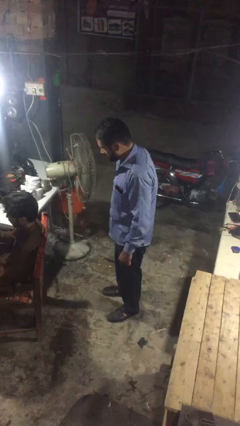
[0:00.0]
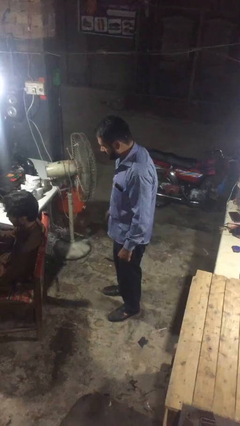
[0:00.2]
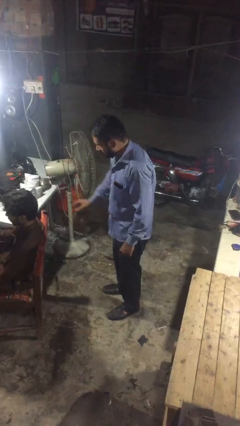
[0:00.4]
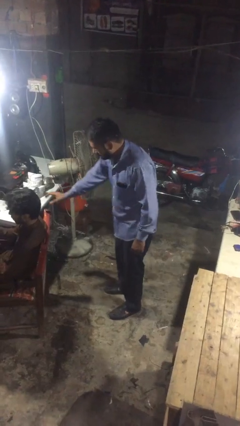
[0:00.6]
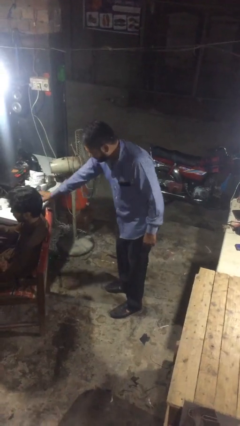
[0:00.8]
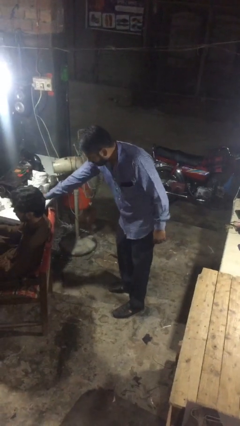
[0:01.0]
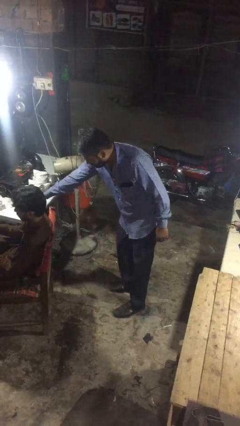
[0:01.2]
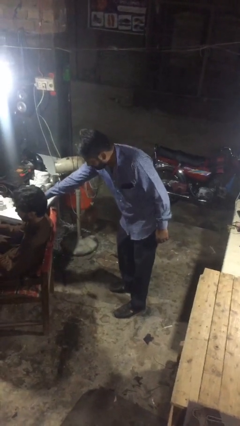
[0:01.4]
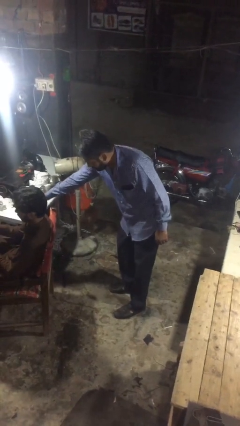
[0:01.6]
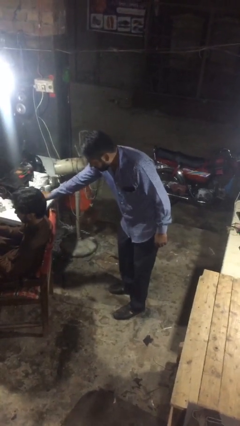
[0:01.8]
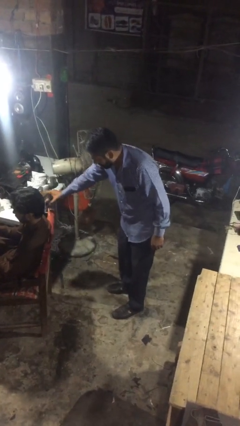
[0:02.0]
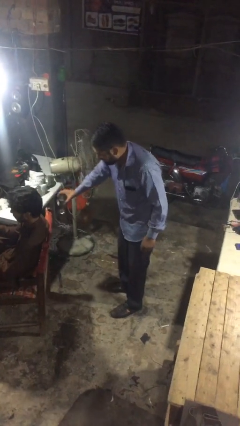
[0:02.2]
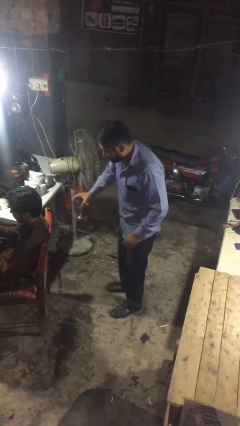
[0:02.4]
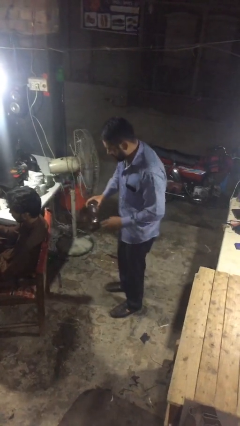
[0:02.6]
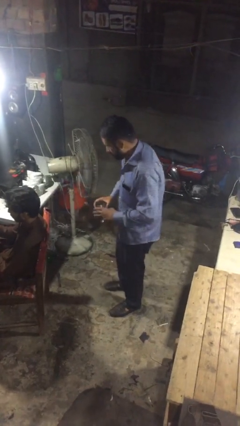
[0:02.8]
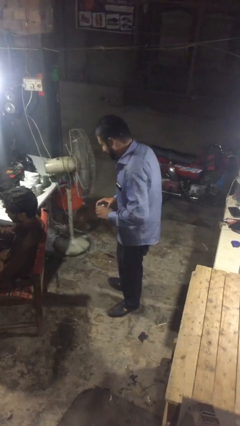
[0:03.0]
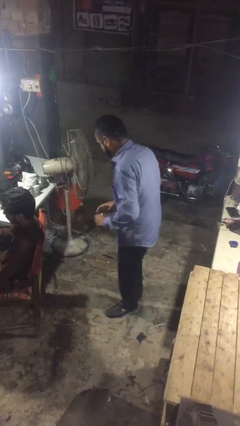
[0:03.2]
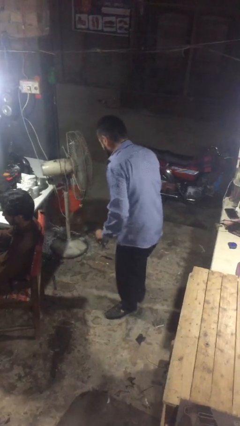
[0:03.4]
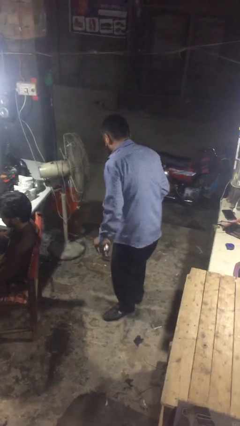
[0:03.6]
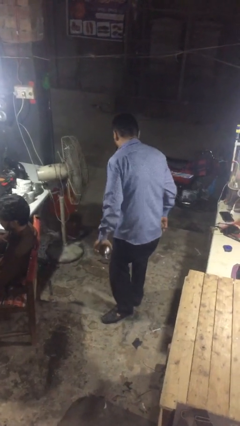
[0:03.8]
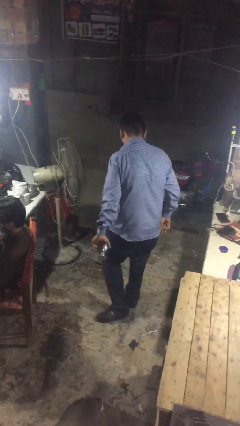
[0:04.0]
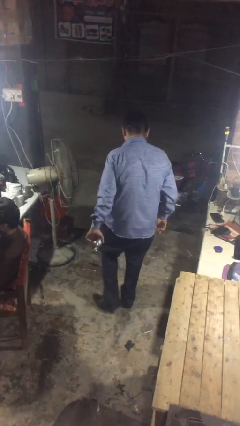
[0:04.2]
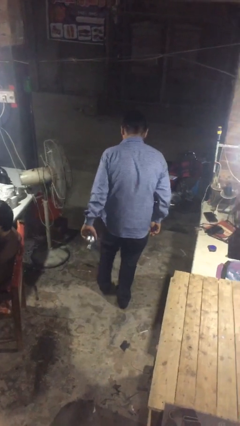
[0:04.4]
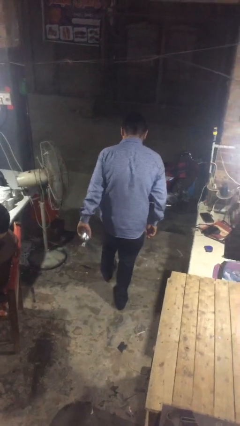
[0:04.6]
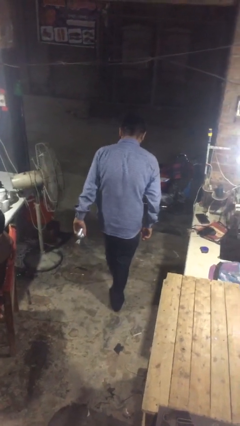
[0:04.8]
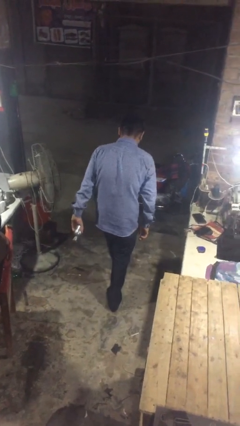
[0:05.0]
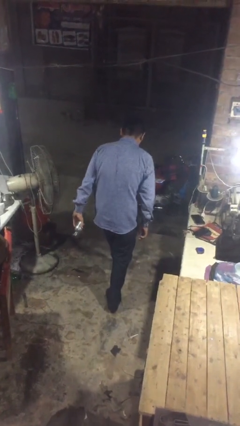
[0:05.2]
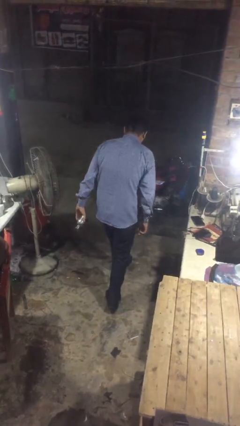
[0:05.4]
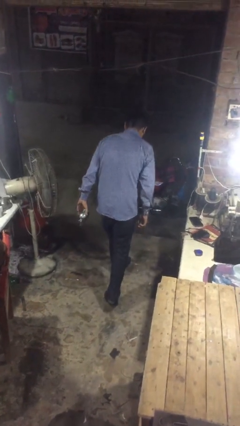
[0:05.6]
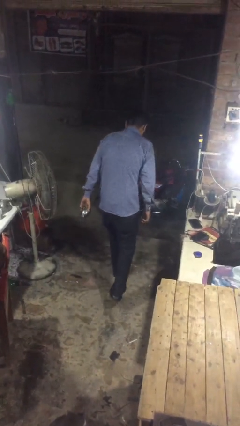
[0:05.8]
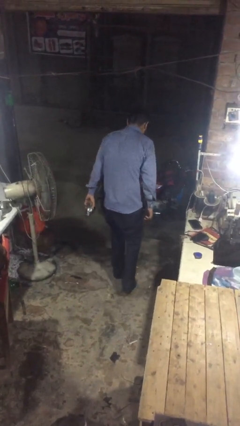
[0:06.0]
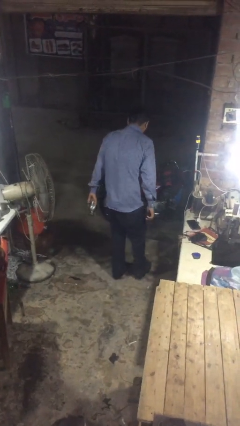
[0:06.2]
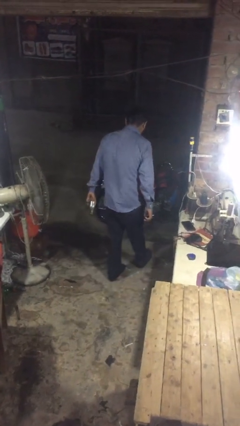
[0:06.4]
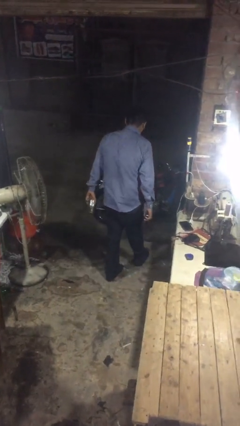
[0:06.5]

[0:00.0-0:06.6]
person steals object from person

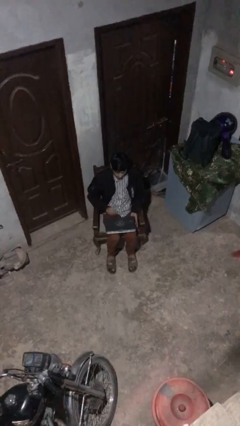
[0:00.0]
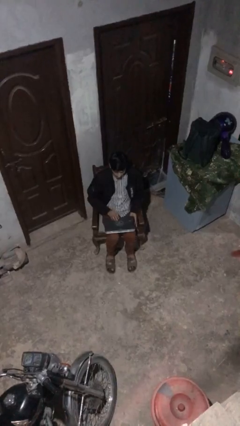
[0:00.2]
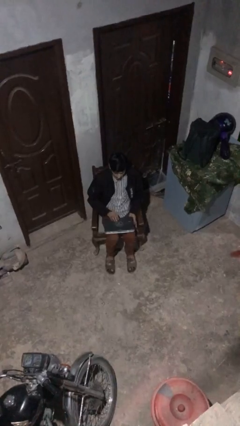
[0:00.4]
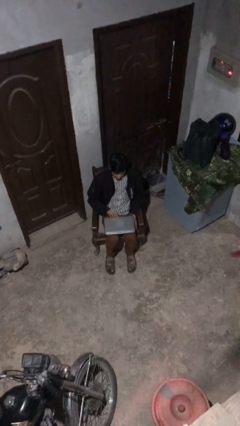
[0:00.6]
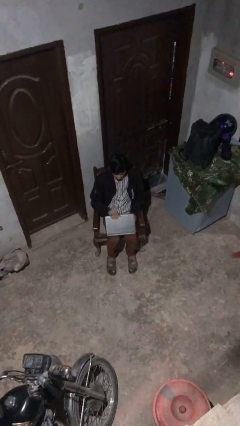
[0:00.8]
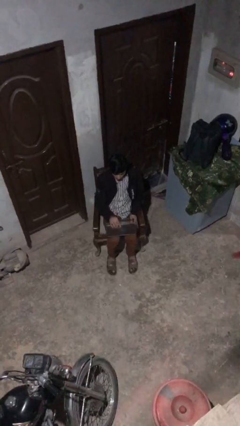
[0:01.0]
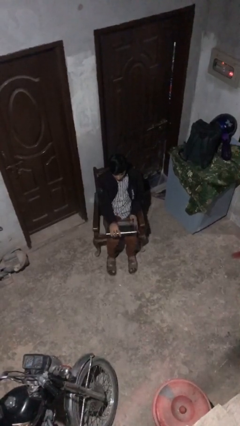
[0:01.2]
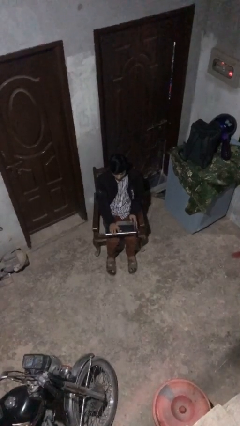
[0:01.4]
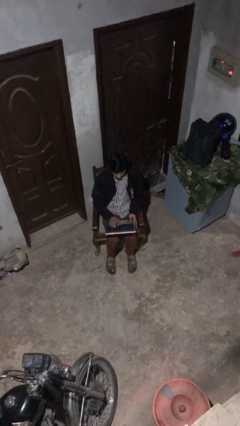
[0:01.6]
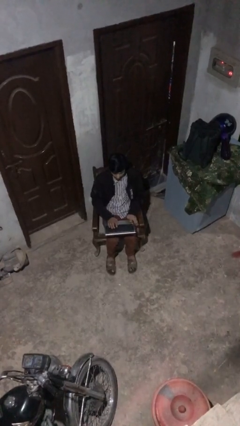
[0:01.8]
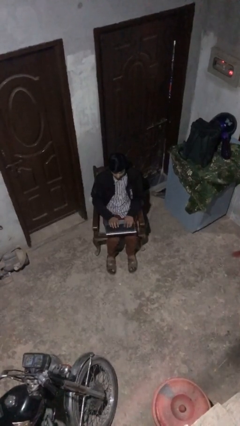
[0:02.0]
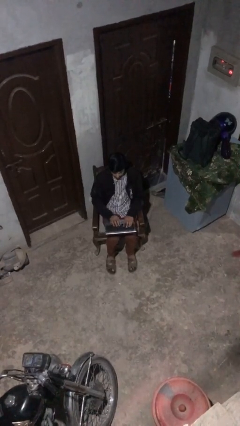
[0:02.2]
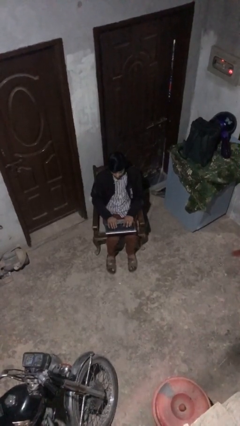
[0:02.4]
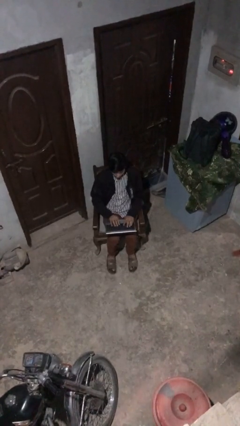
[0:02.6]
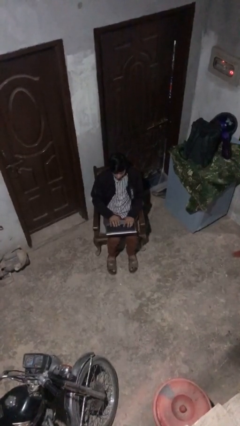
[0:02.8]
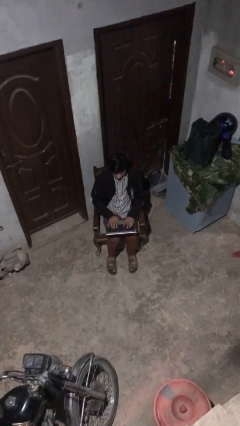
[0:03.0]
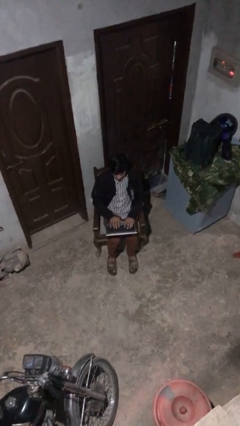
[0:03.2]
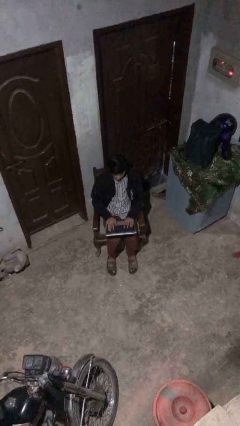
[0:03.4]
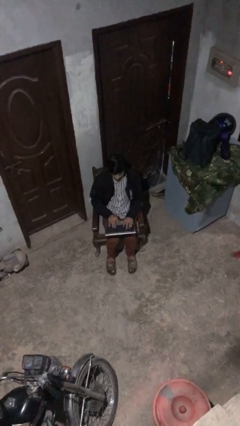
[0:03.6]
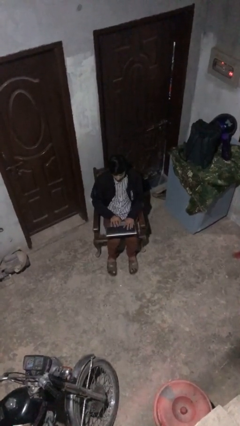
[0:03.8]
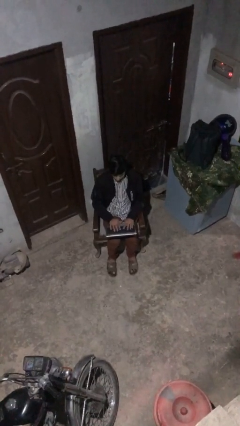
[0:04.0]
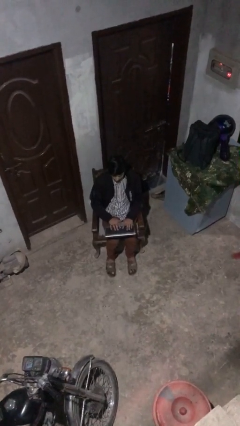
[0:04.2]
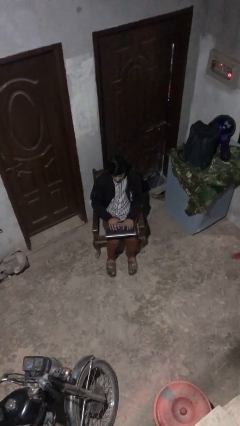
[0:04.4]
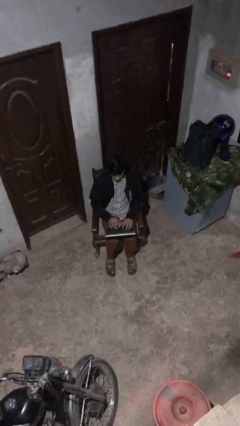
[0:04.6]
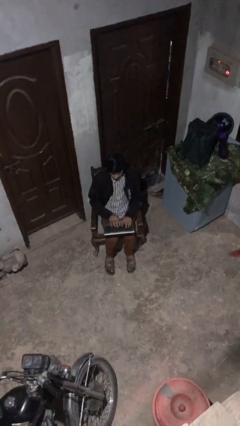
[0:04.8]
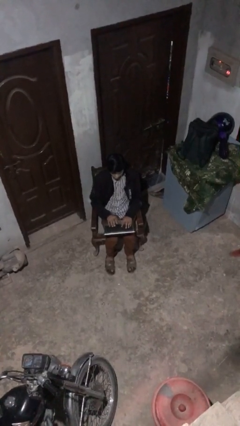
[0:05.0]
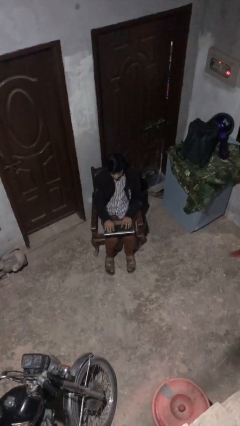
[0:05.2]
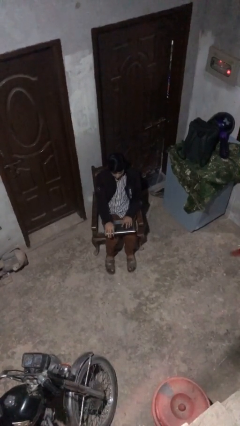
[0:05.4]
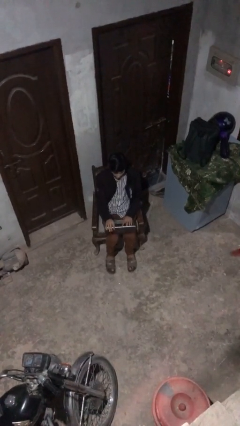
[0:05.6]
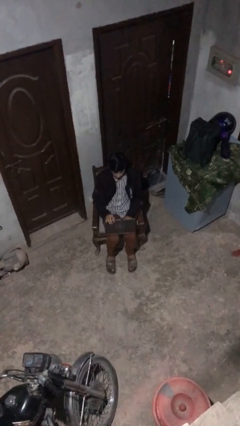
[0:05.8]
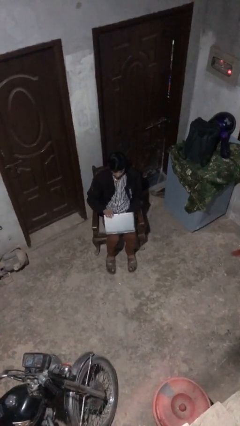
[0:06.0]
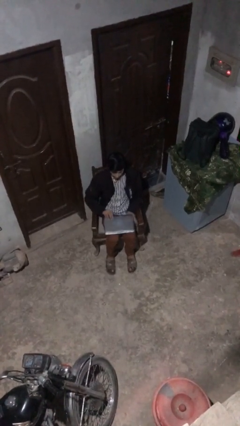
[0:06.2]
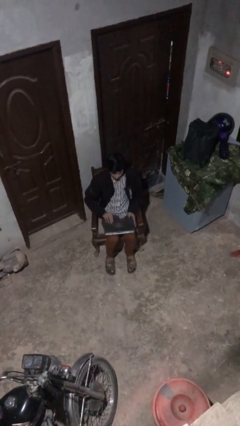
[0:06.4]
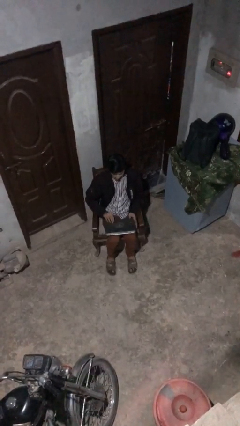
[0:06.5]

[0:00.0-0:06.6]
person interacts with laptop

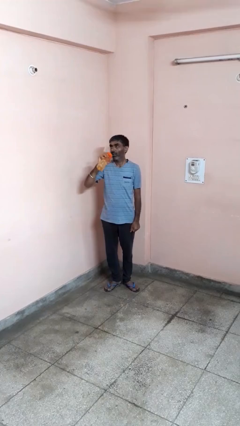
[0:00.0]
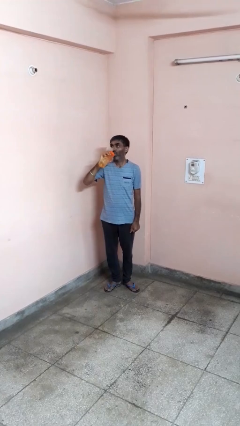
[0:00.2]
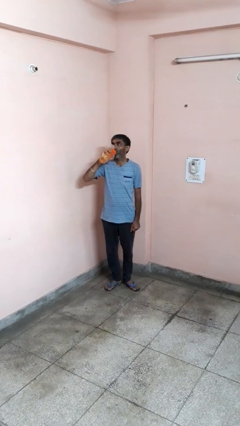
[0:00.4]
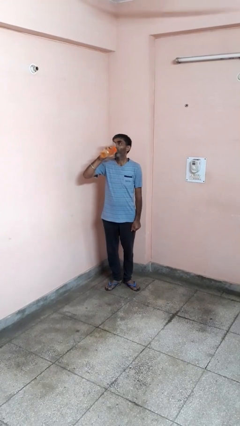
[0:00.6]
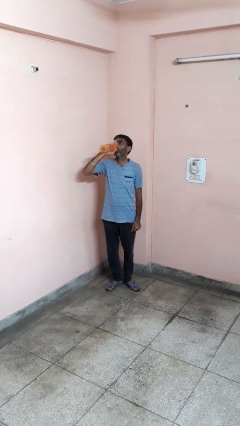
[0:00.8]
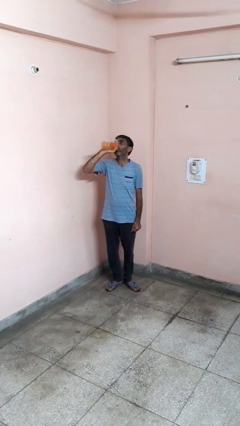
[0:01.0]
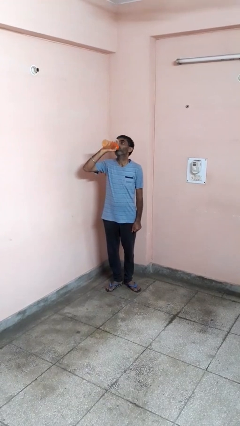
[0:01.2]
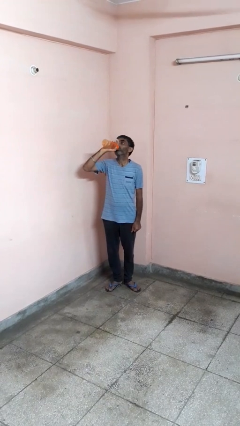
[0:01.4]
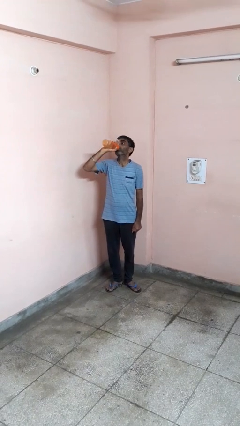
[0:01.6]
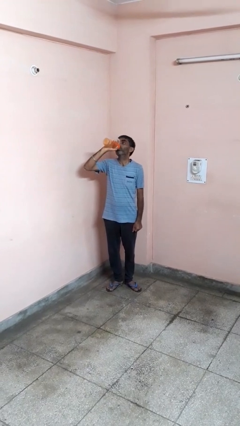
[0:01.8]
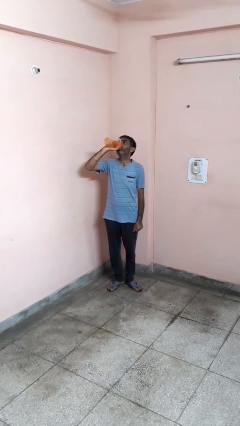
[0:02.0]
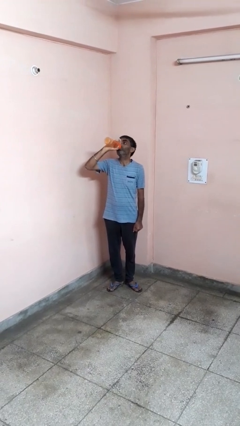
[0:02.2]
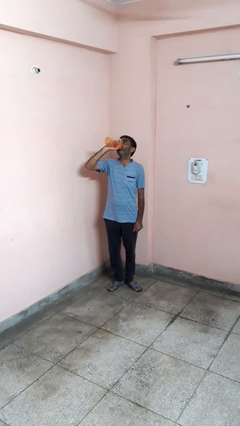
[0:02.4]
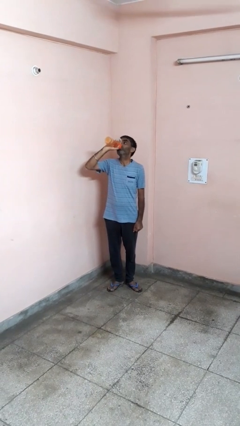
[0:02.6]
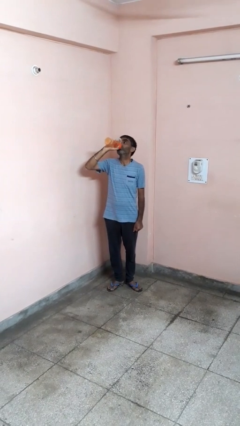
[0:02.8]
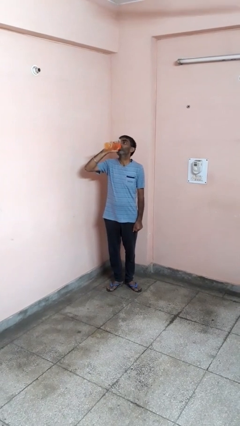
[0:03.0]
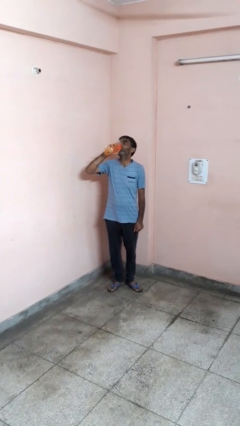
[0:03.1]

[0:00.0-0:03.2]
person drinks from bottle

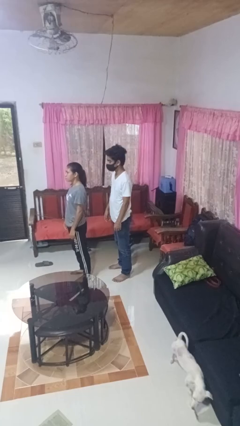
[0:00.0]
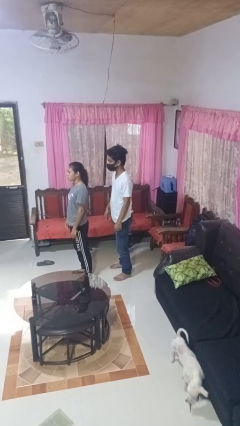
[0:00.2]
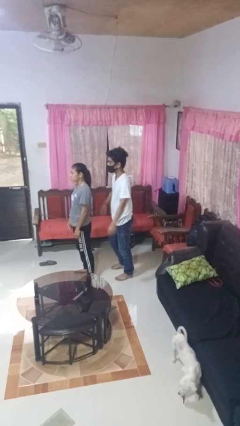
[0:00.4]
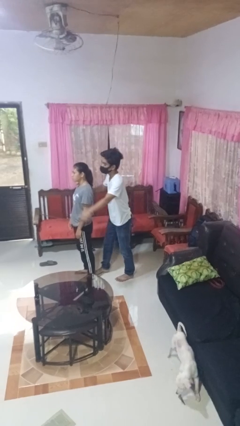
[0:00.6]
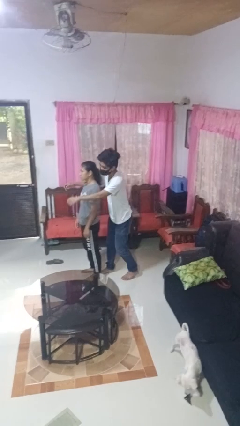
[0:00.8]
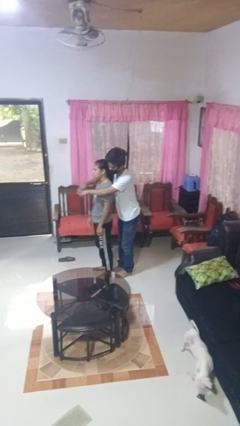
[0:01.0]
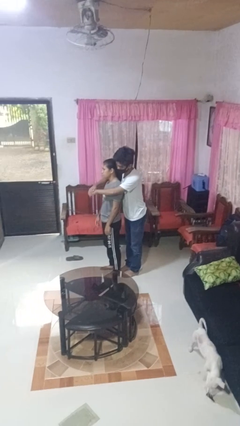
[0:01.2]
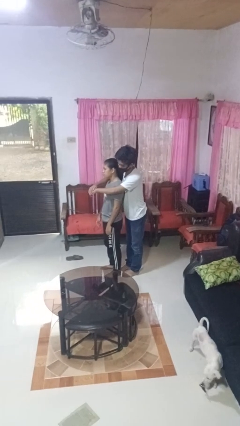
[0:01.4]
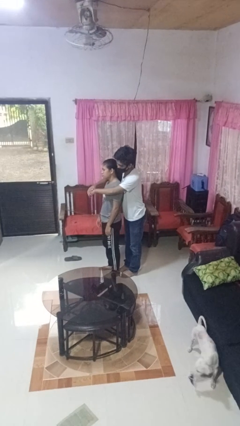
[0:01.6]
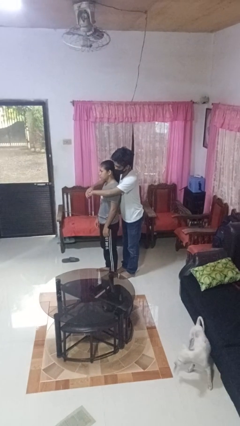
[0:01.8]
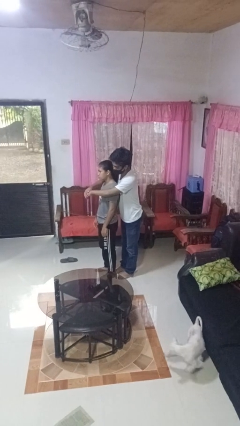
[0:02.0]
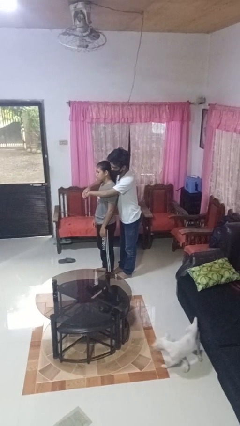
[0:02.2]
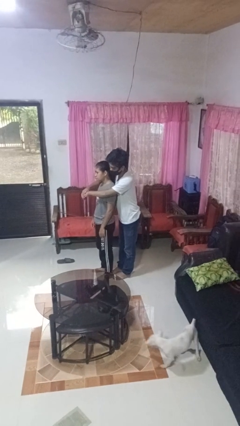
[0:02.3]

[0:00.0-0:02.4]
person hugs person from behind
